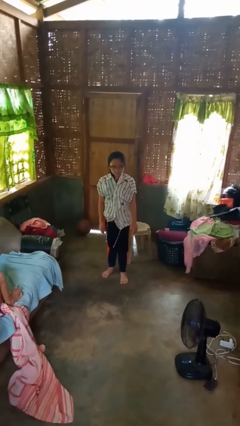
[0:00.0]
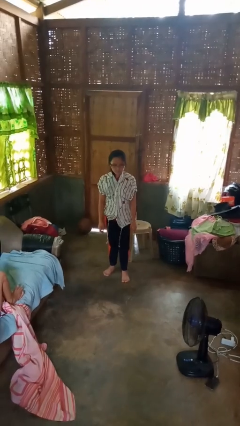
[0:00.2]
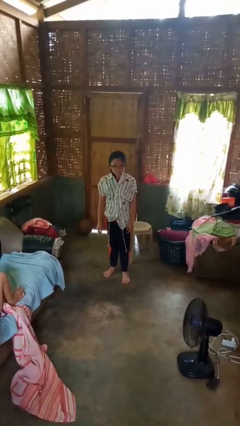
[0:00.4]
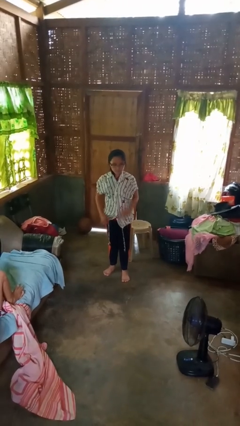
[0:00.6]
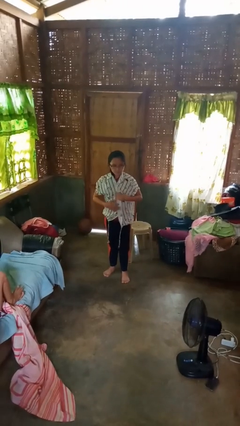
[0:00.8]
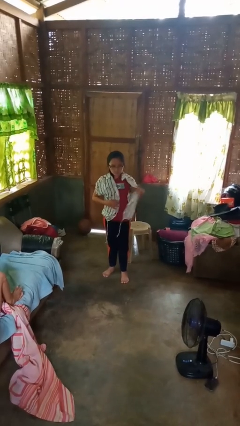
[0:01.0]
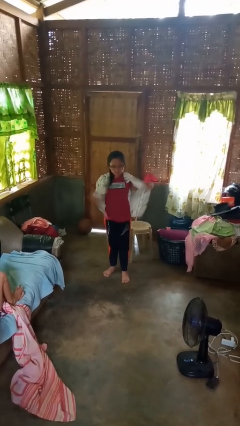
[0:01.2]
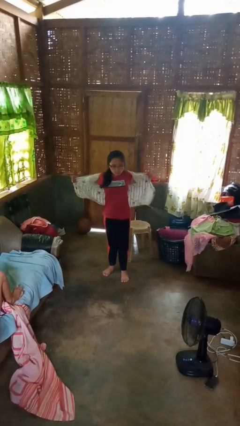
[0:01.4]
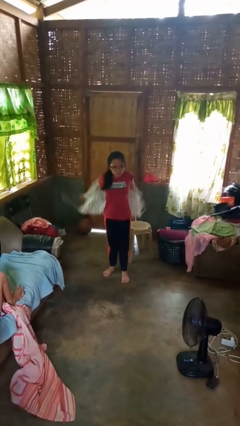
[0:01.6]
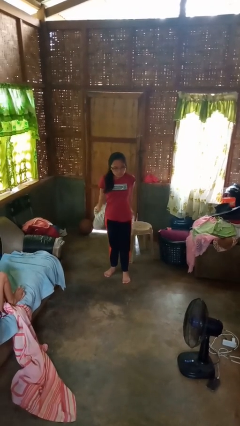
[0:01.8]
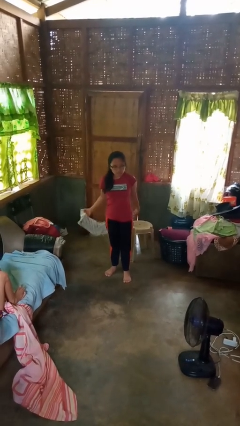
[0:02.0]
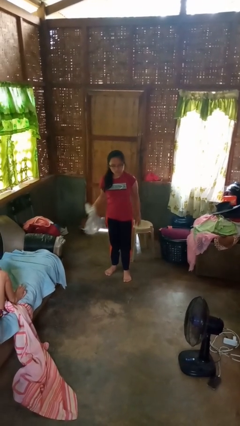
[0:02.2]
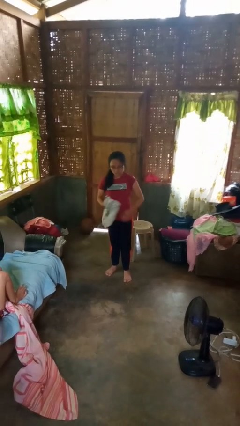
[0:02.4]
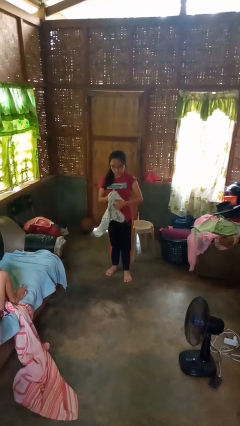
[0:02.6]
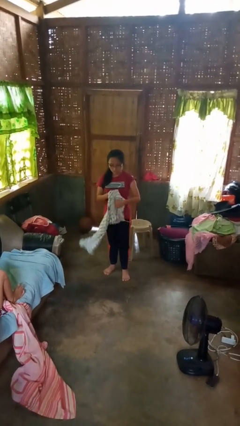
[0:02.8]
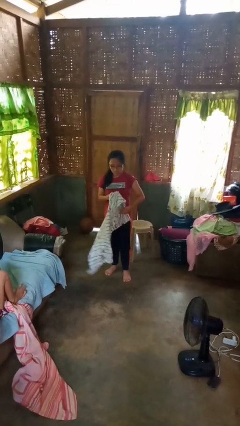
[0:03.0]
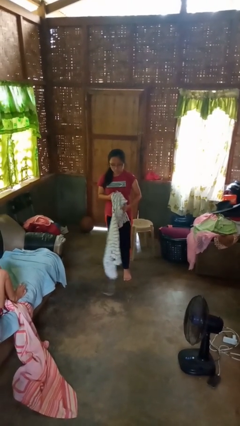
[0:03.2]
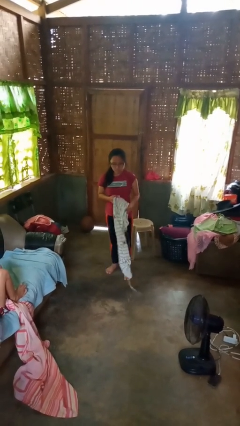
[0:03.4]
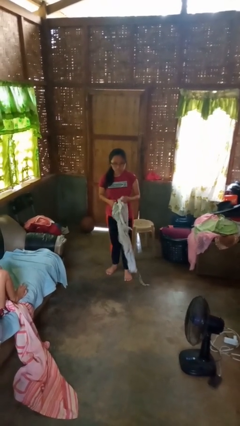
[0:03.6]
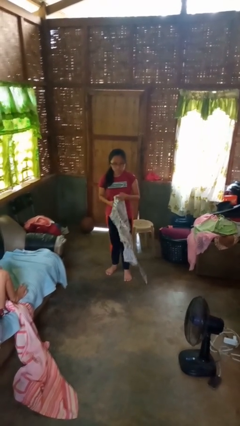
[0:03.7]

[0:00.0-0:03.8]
person takes off shirt

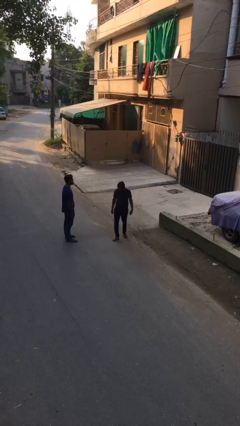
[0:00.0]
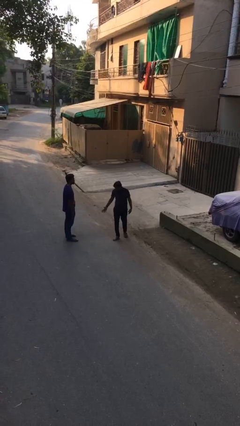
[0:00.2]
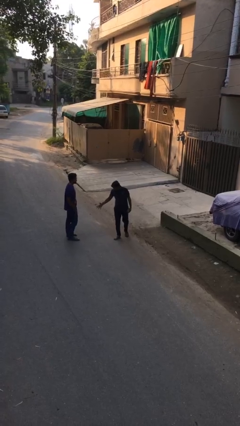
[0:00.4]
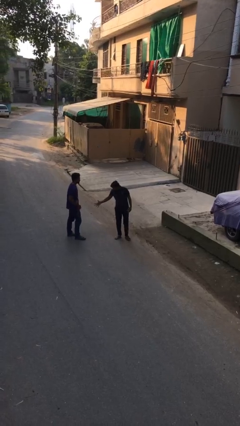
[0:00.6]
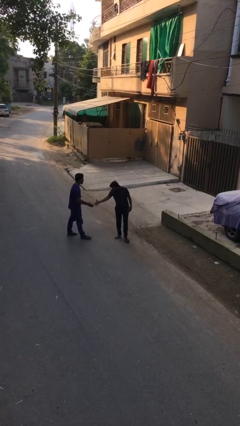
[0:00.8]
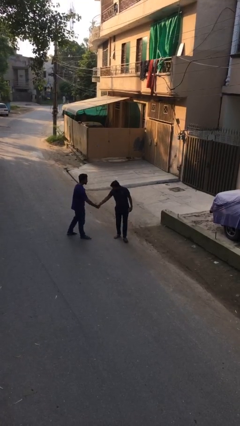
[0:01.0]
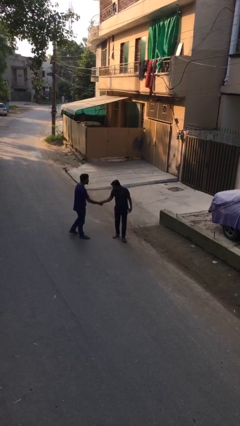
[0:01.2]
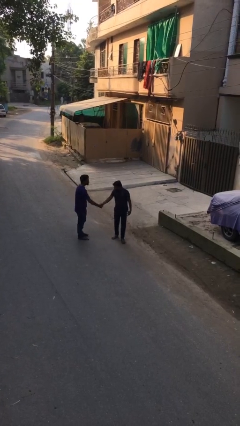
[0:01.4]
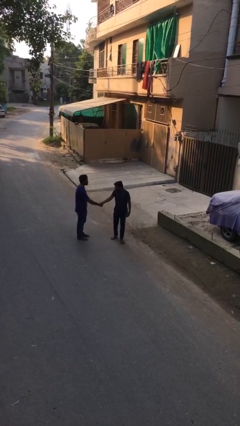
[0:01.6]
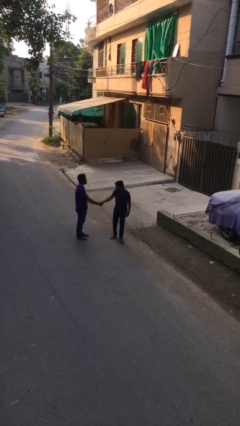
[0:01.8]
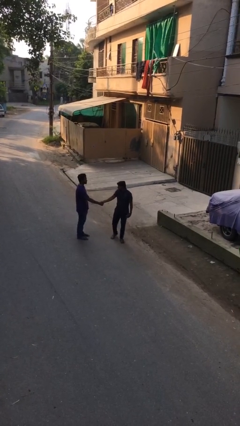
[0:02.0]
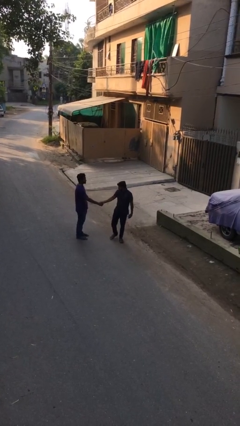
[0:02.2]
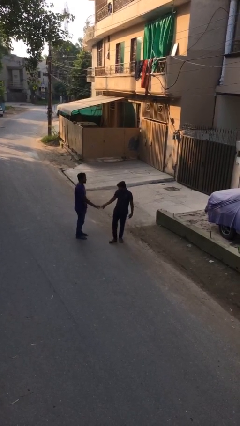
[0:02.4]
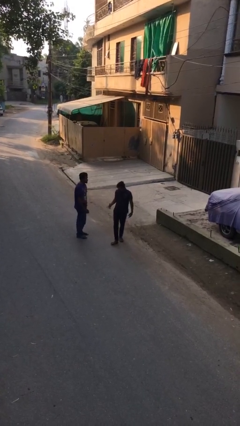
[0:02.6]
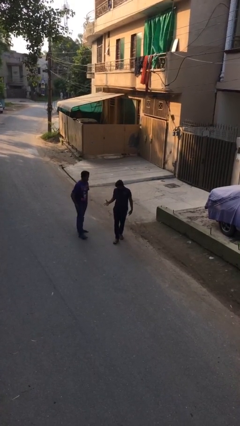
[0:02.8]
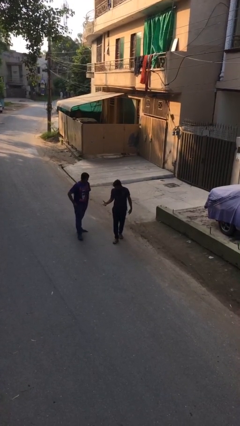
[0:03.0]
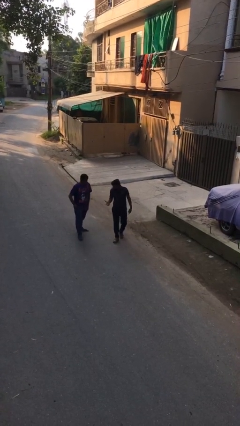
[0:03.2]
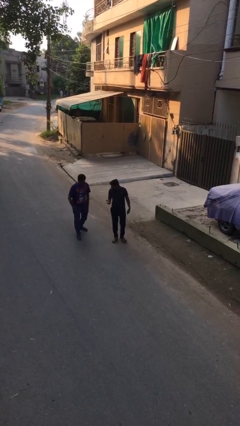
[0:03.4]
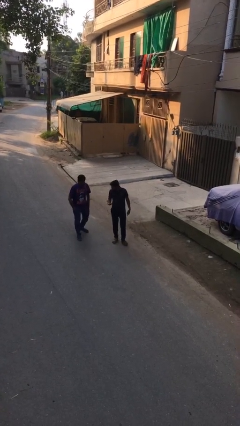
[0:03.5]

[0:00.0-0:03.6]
person shakes hand

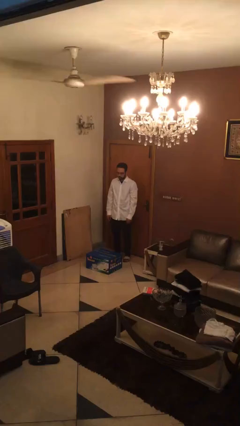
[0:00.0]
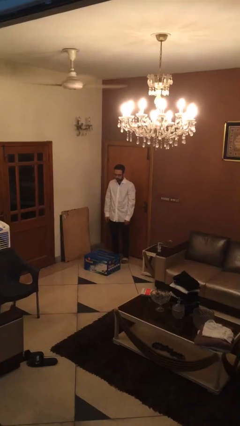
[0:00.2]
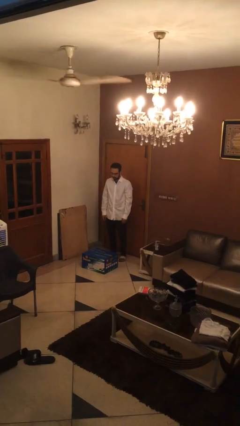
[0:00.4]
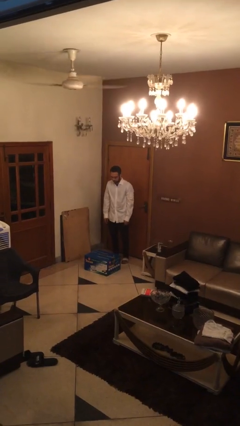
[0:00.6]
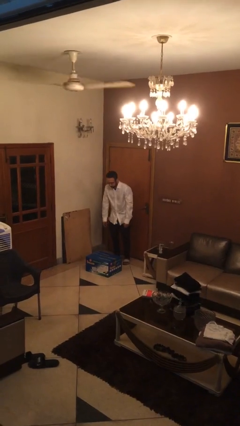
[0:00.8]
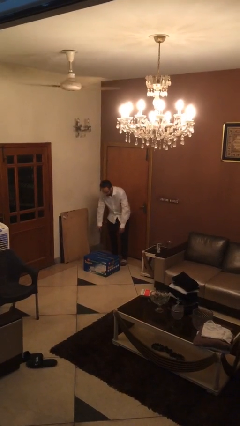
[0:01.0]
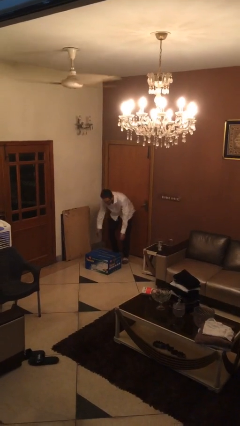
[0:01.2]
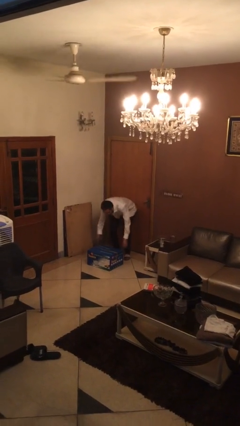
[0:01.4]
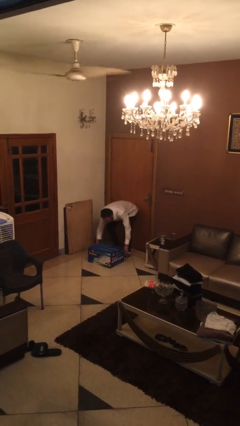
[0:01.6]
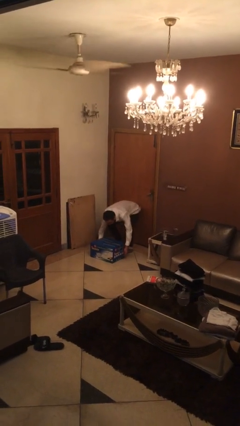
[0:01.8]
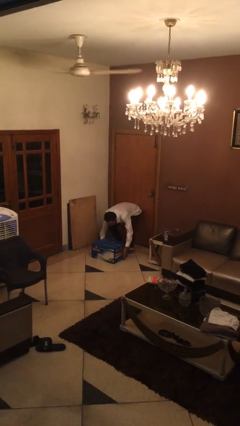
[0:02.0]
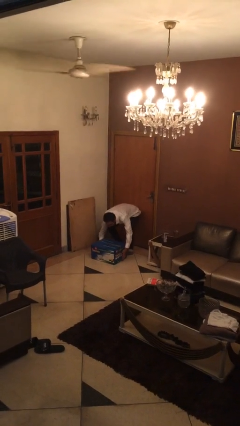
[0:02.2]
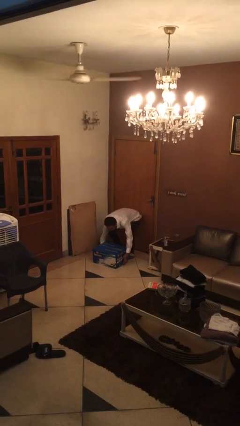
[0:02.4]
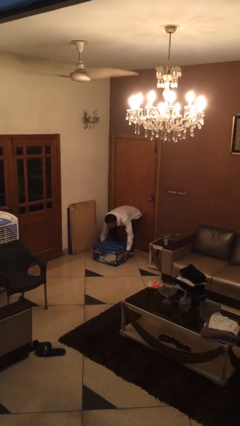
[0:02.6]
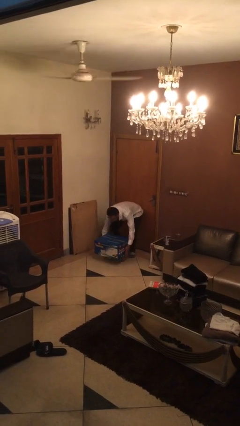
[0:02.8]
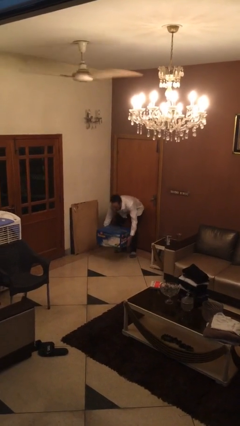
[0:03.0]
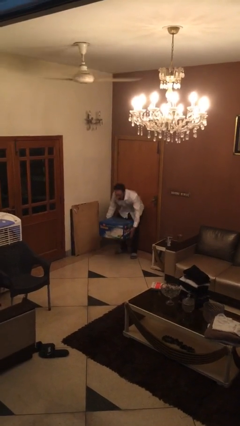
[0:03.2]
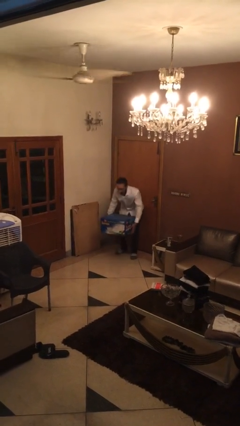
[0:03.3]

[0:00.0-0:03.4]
person picks up object from floor

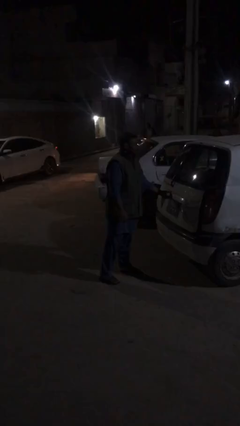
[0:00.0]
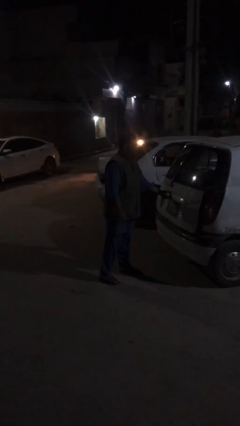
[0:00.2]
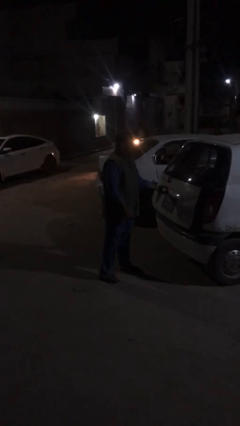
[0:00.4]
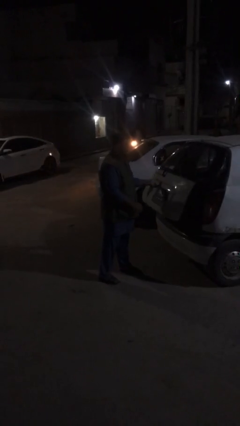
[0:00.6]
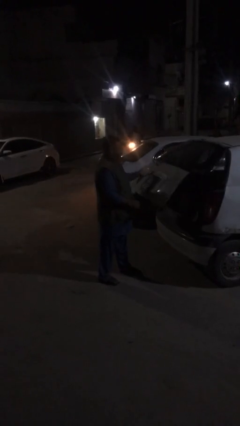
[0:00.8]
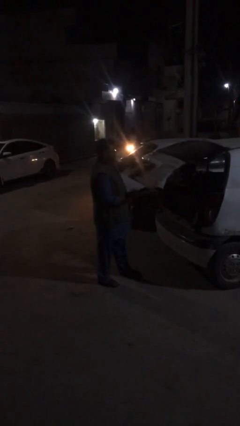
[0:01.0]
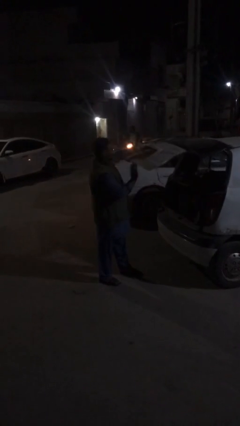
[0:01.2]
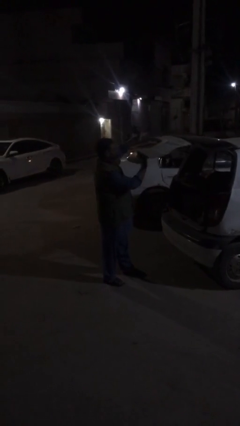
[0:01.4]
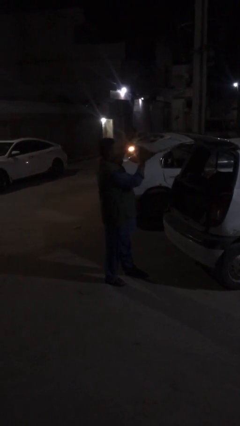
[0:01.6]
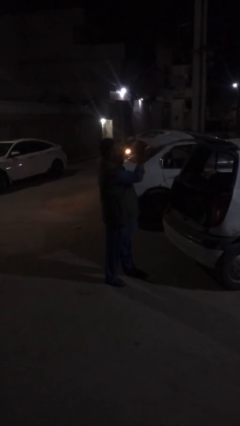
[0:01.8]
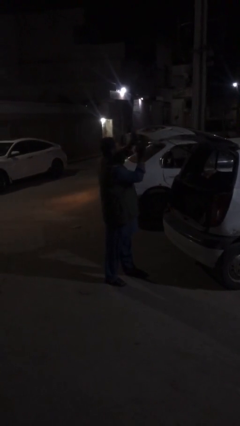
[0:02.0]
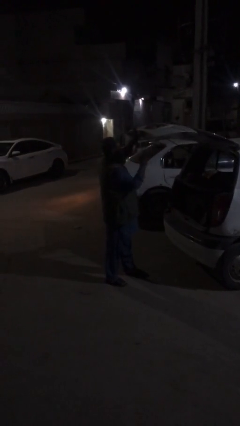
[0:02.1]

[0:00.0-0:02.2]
person opens car trunk

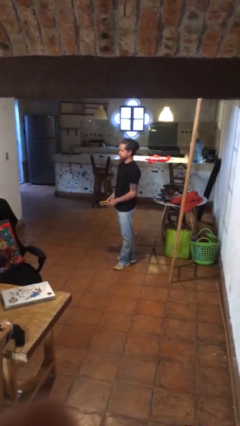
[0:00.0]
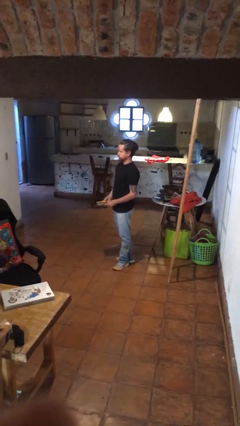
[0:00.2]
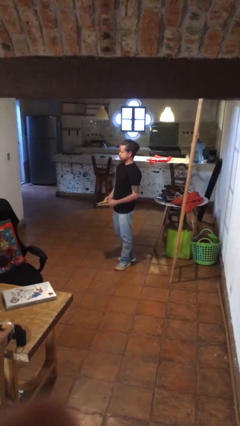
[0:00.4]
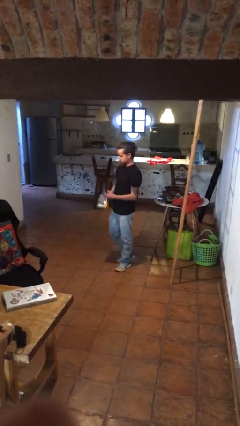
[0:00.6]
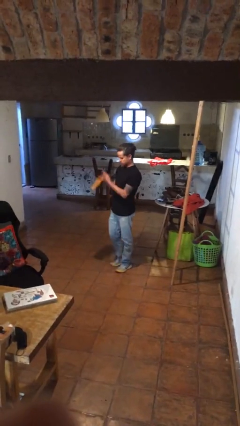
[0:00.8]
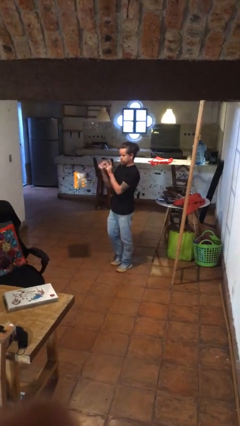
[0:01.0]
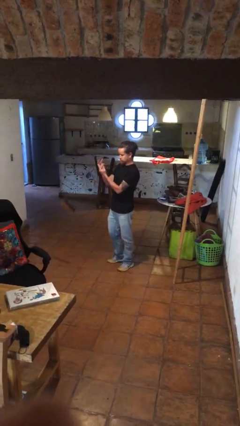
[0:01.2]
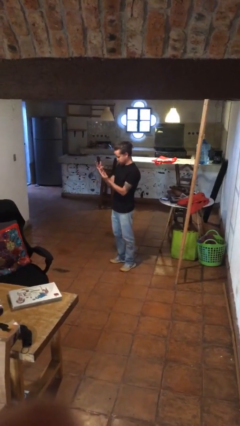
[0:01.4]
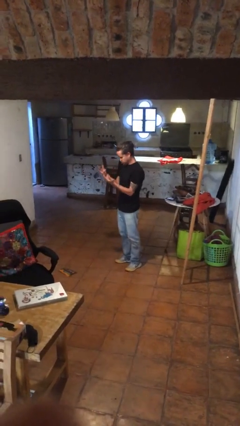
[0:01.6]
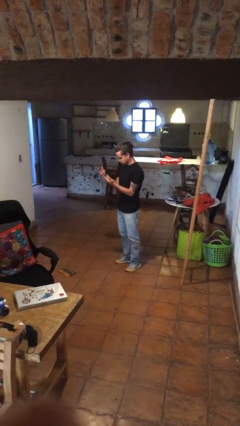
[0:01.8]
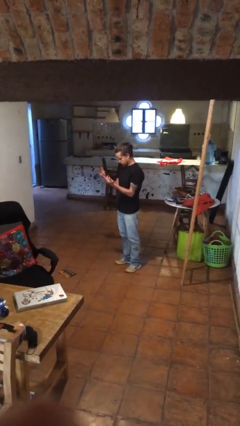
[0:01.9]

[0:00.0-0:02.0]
person drops object

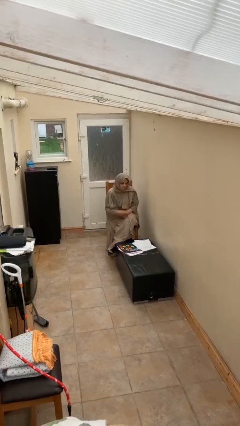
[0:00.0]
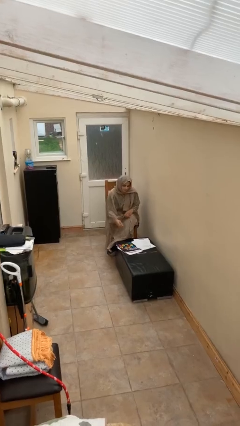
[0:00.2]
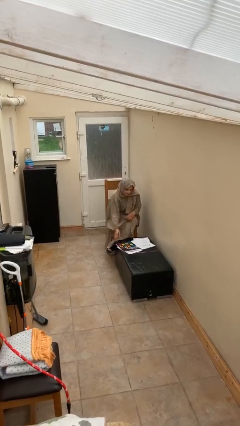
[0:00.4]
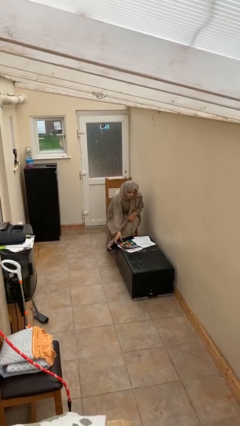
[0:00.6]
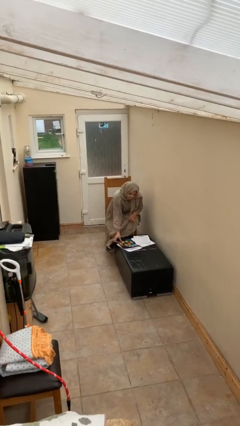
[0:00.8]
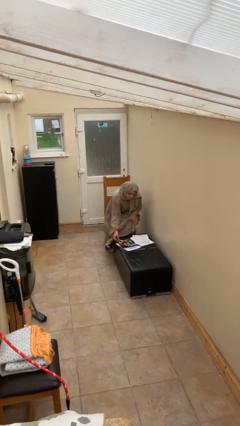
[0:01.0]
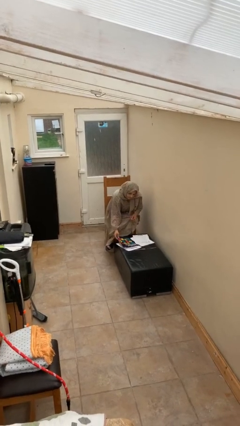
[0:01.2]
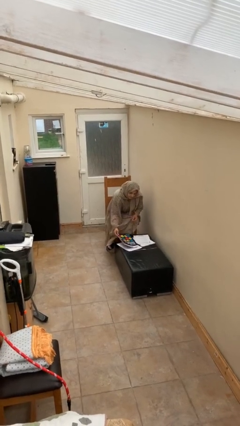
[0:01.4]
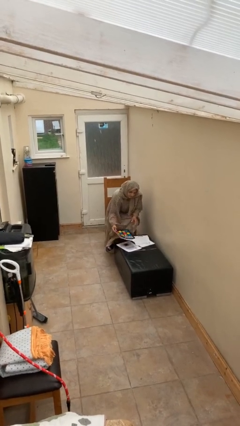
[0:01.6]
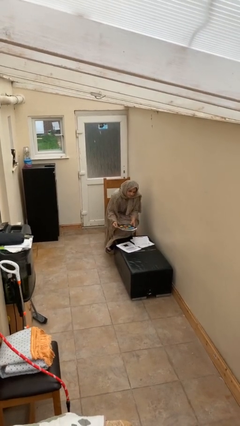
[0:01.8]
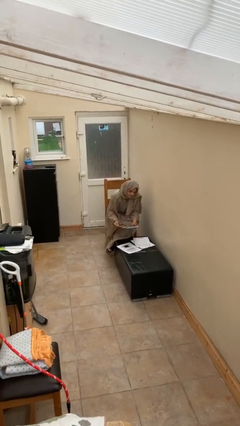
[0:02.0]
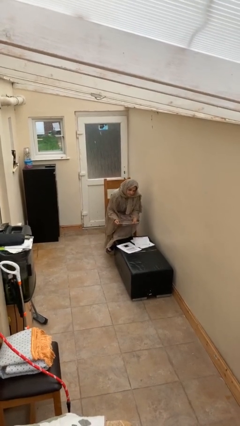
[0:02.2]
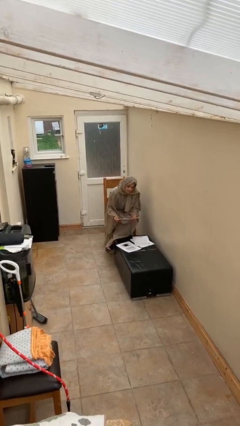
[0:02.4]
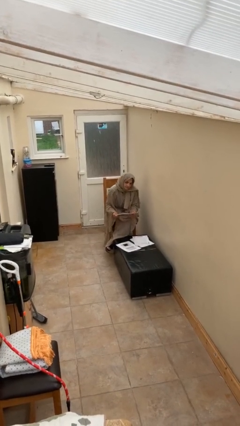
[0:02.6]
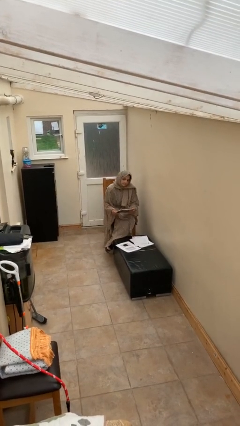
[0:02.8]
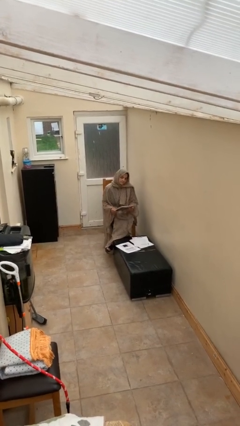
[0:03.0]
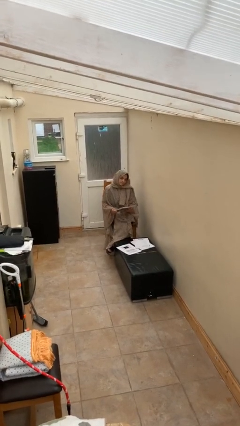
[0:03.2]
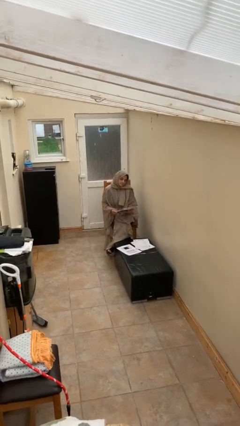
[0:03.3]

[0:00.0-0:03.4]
person picks up object from table
